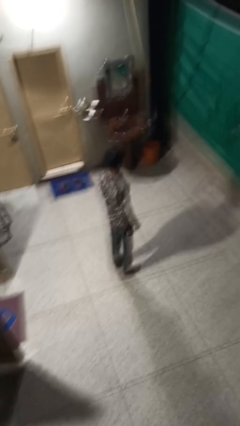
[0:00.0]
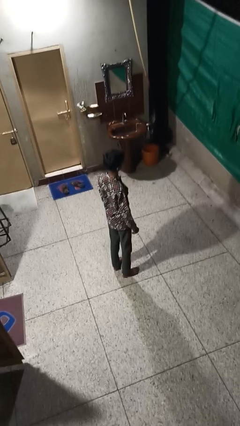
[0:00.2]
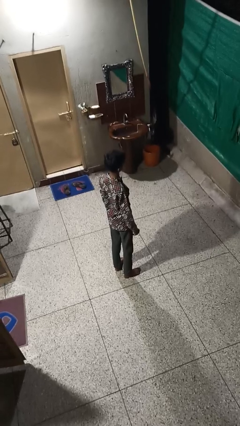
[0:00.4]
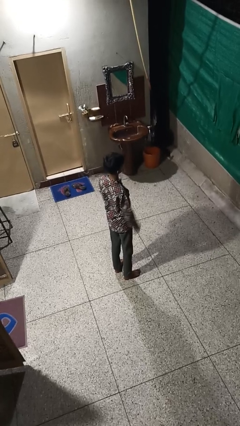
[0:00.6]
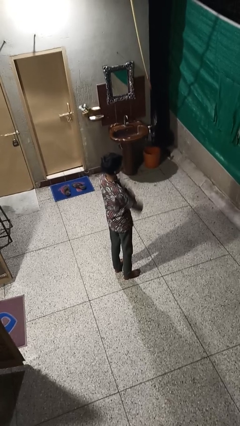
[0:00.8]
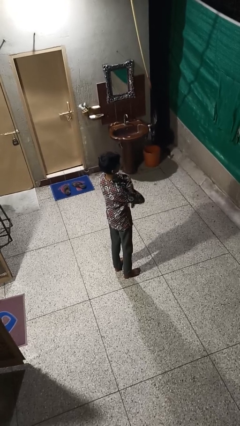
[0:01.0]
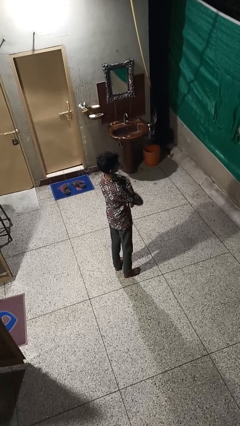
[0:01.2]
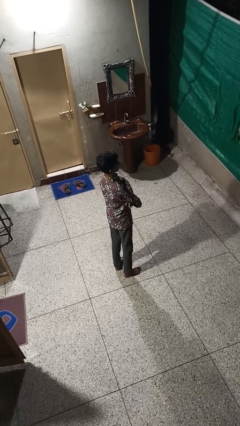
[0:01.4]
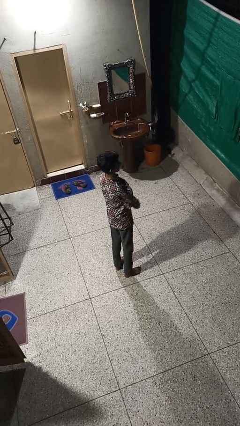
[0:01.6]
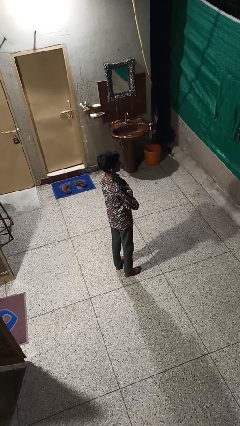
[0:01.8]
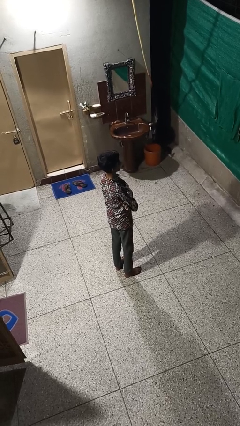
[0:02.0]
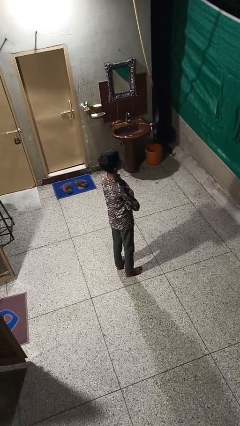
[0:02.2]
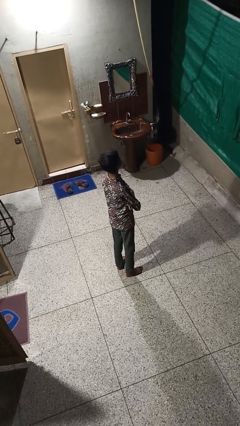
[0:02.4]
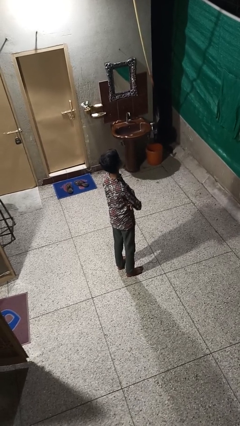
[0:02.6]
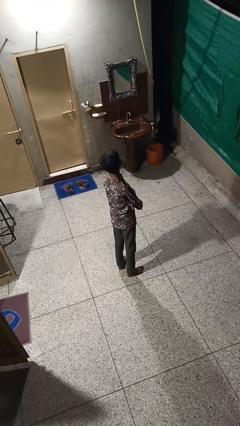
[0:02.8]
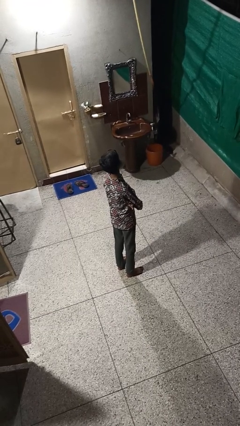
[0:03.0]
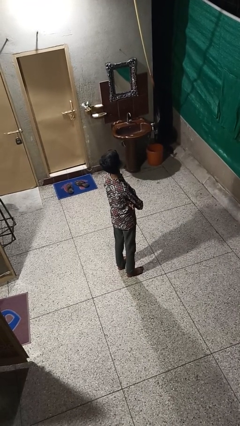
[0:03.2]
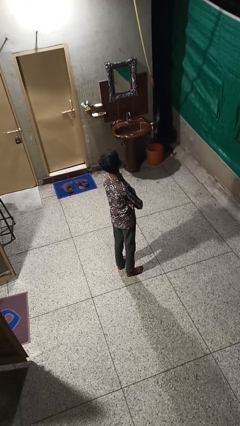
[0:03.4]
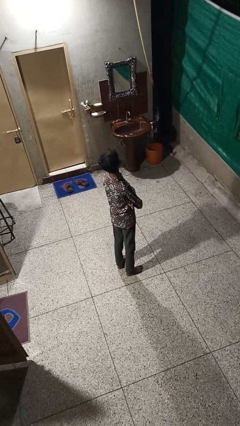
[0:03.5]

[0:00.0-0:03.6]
person crosses arms

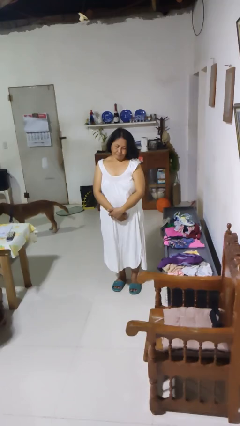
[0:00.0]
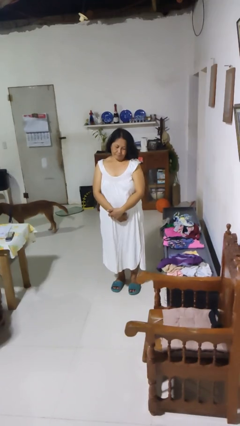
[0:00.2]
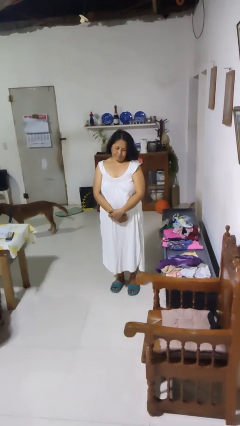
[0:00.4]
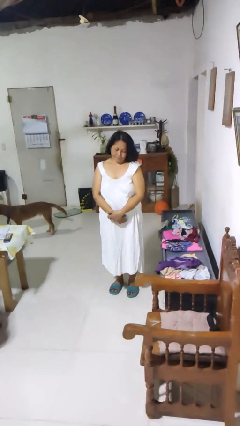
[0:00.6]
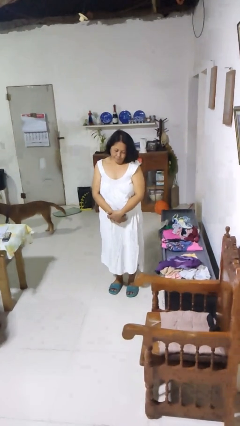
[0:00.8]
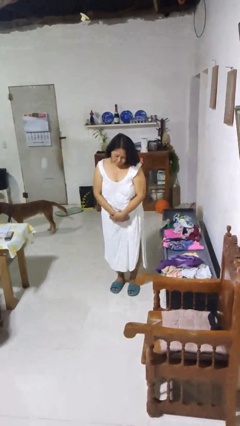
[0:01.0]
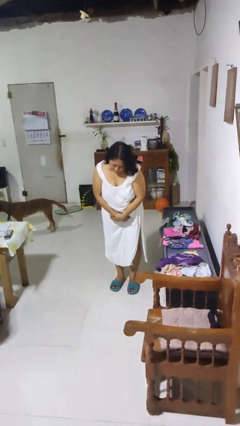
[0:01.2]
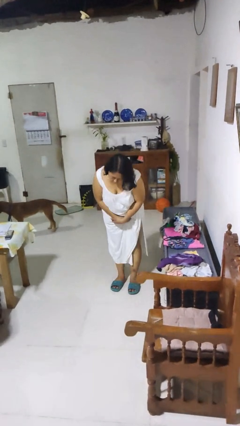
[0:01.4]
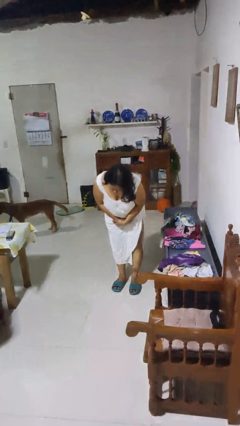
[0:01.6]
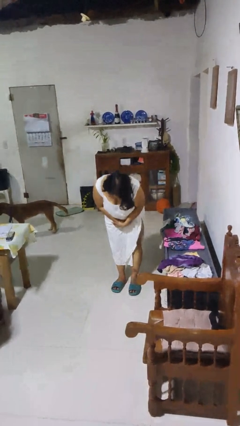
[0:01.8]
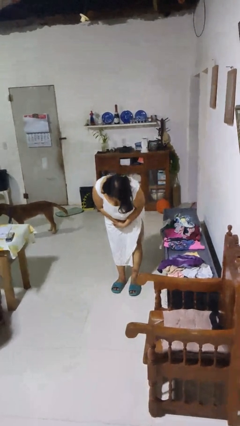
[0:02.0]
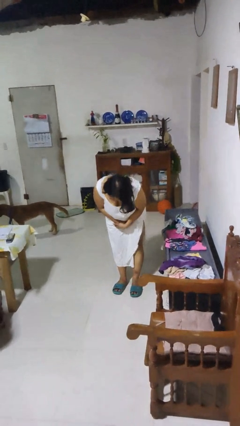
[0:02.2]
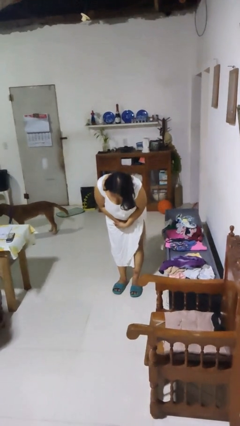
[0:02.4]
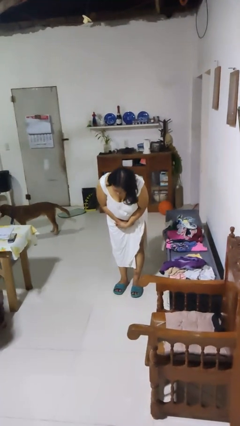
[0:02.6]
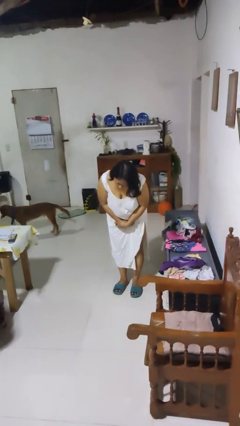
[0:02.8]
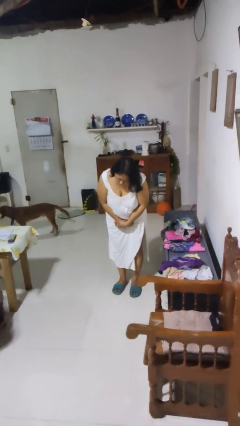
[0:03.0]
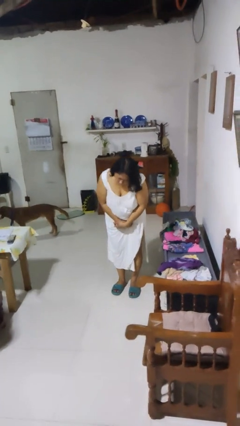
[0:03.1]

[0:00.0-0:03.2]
person bows

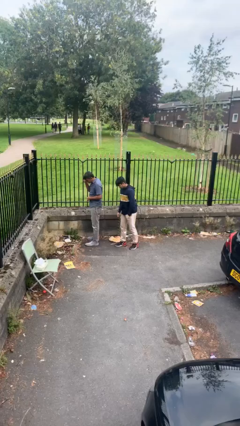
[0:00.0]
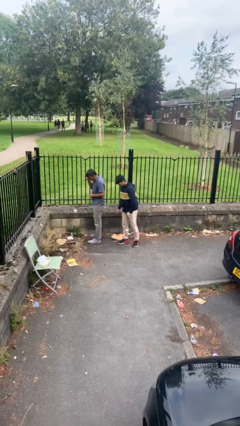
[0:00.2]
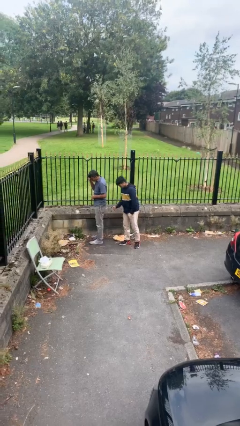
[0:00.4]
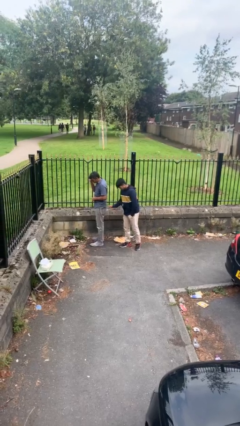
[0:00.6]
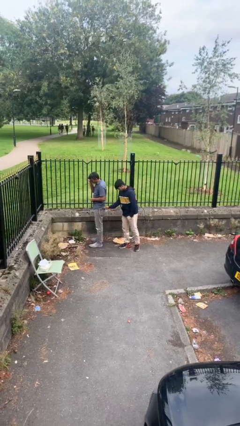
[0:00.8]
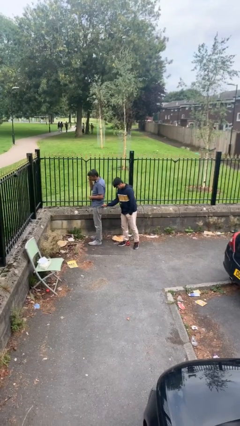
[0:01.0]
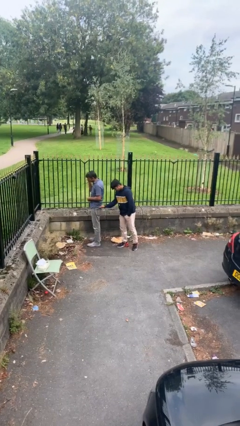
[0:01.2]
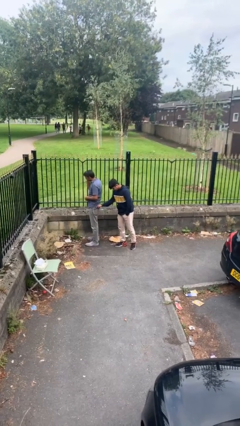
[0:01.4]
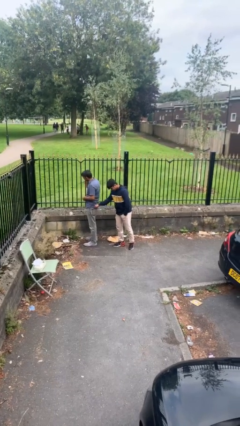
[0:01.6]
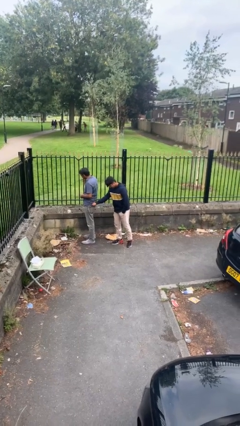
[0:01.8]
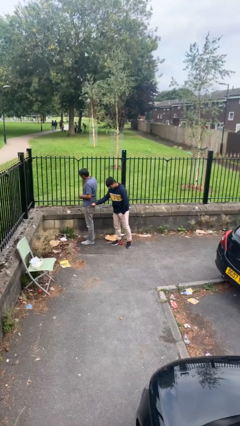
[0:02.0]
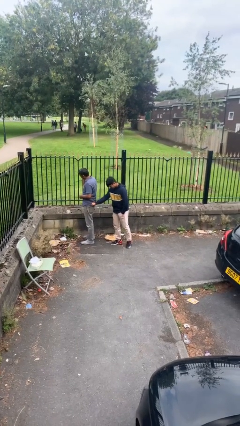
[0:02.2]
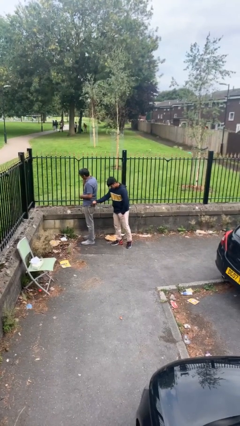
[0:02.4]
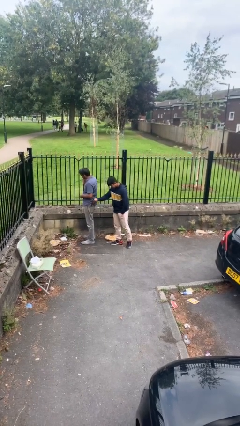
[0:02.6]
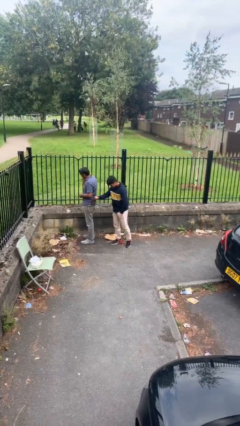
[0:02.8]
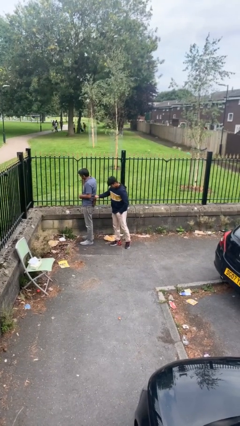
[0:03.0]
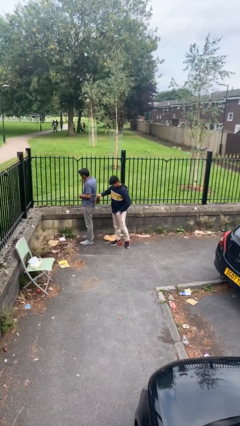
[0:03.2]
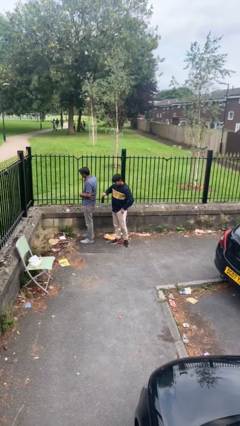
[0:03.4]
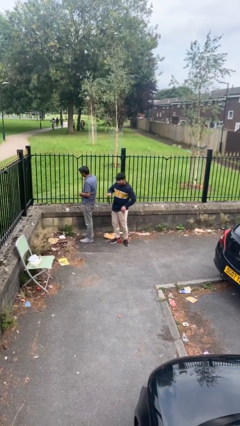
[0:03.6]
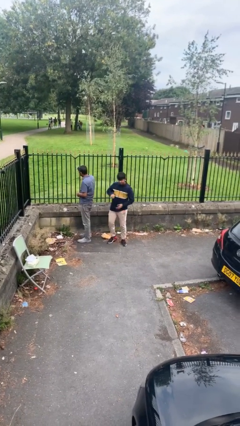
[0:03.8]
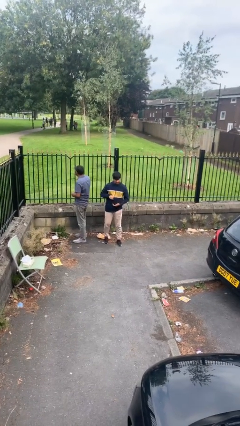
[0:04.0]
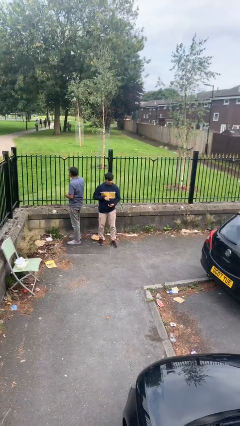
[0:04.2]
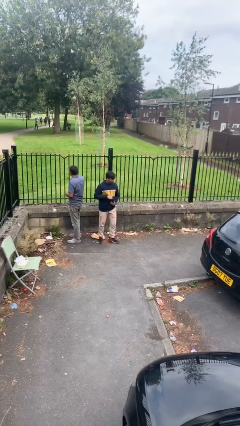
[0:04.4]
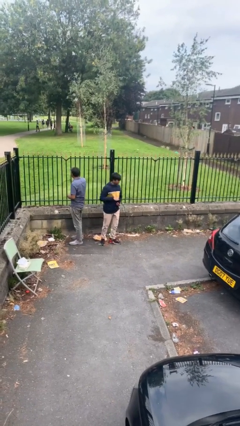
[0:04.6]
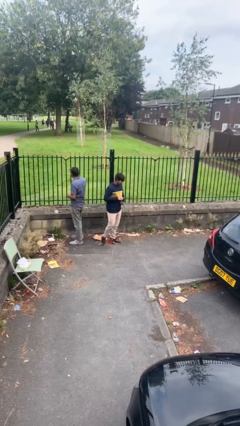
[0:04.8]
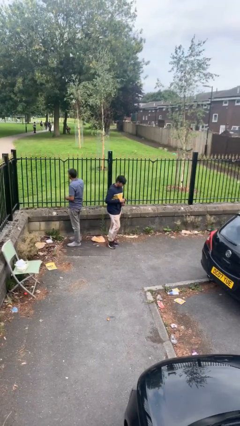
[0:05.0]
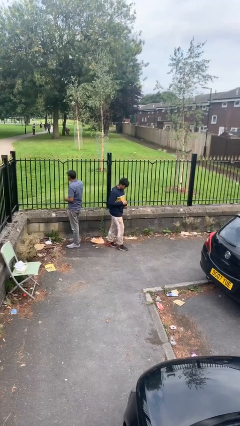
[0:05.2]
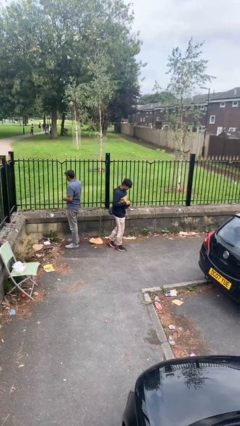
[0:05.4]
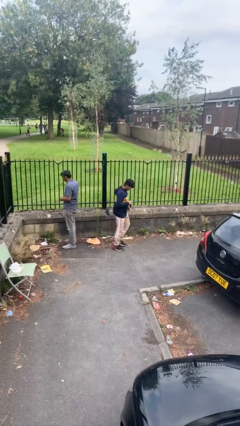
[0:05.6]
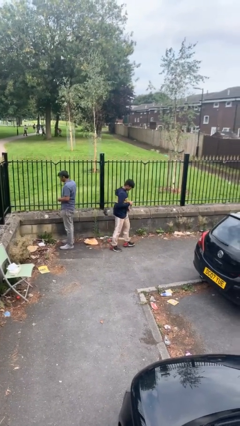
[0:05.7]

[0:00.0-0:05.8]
person steals object from person

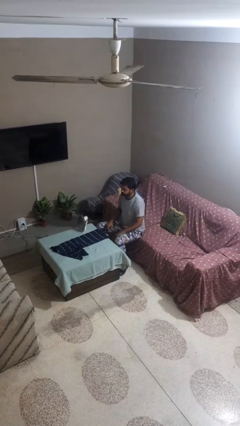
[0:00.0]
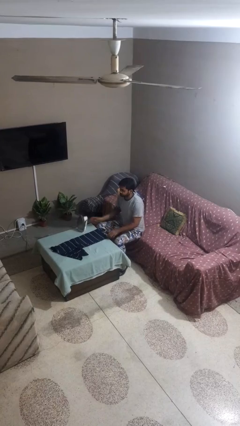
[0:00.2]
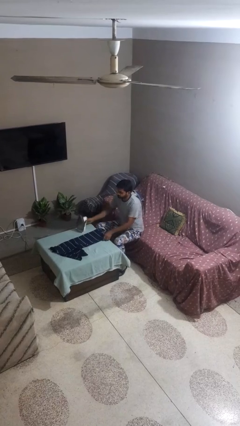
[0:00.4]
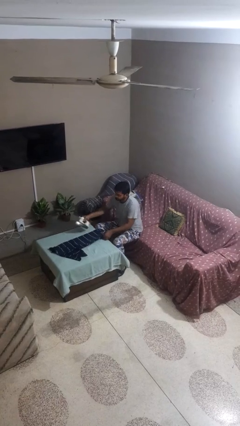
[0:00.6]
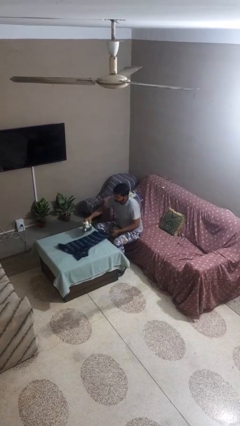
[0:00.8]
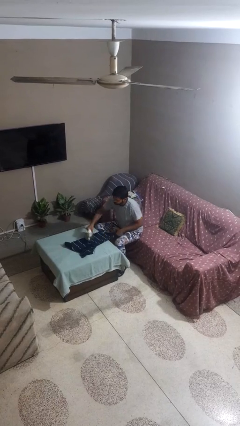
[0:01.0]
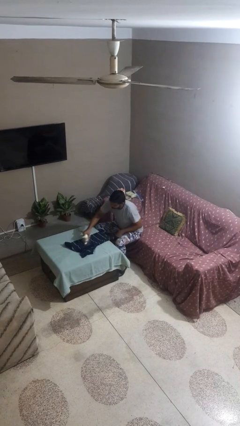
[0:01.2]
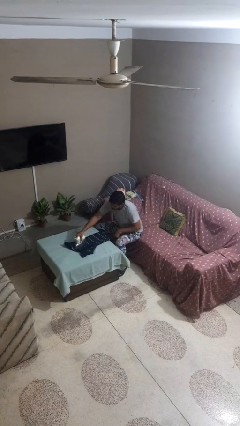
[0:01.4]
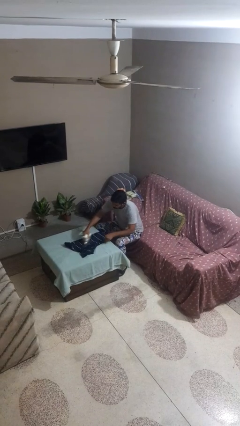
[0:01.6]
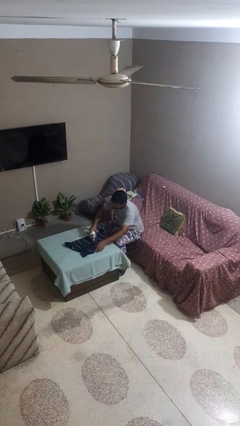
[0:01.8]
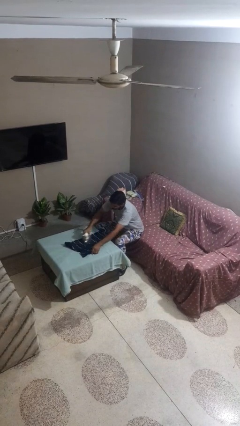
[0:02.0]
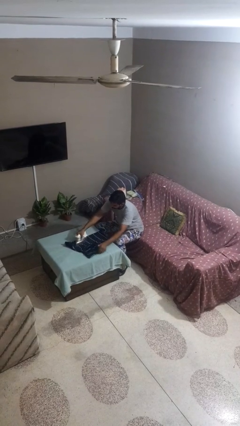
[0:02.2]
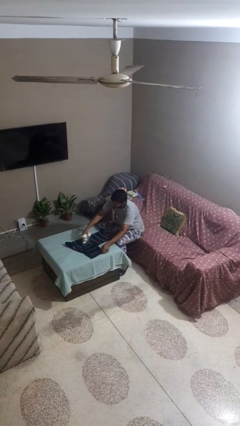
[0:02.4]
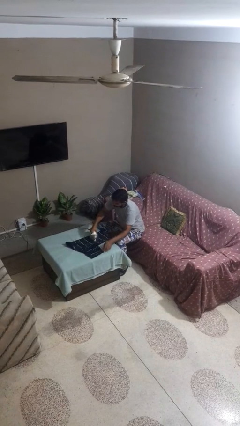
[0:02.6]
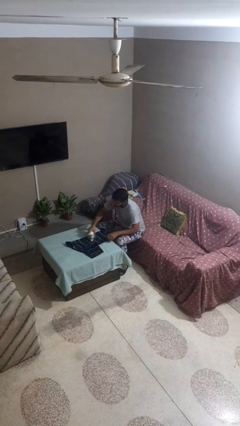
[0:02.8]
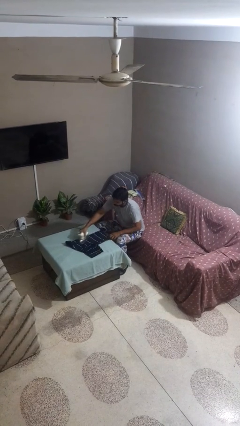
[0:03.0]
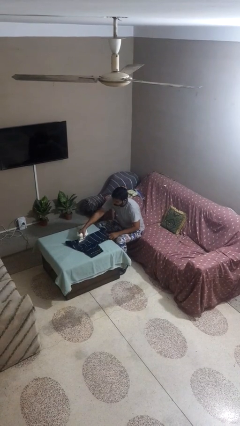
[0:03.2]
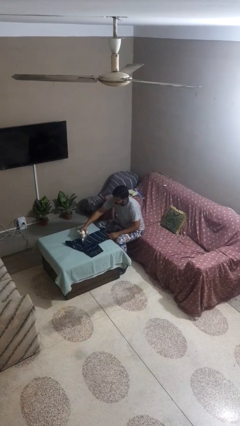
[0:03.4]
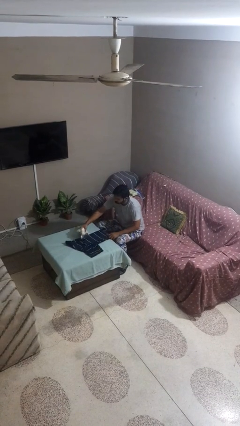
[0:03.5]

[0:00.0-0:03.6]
person irons clothes

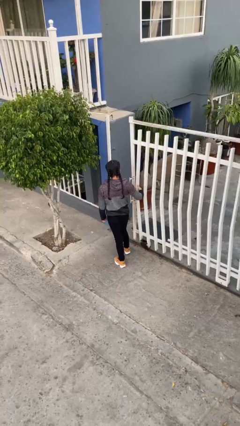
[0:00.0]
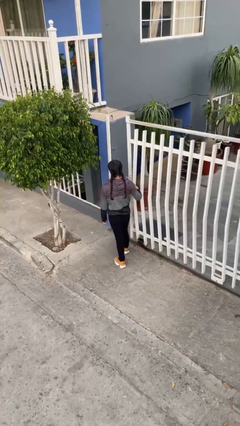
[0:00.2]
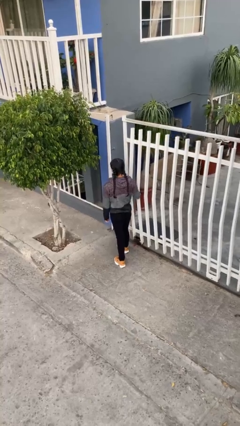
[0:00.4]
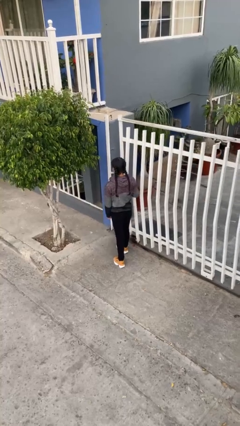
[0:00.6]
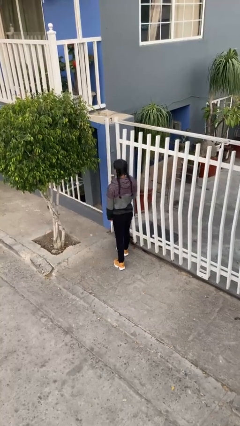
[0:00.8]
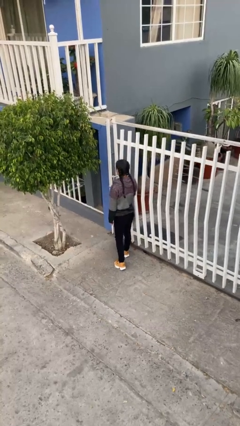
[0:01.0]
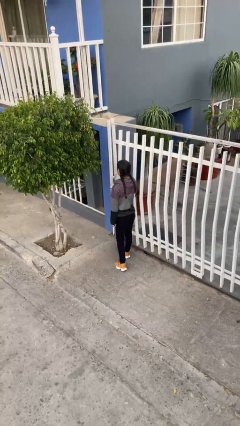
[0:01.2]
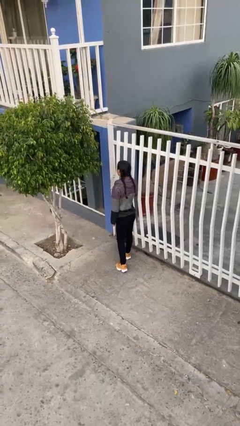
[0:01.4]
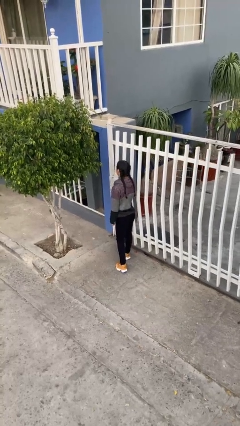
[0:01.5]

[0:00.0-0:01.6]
person closes facility door
